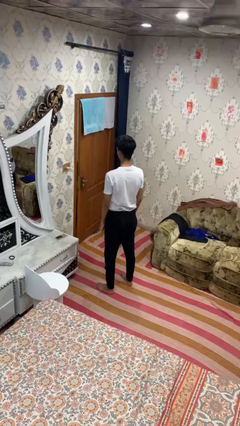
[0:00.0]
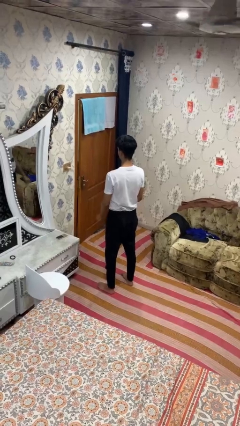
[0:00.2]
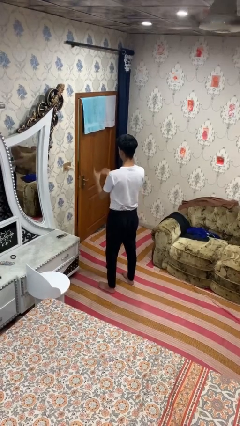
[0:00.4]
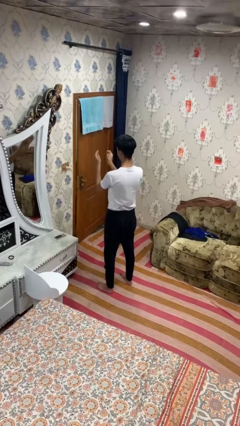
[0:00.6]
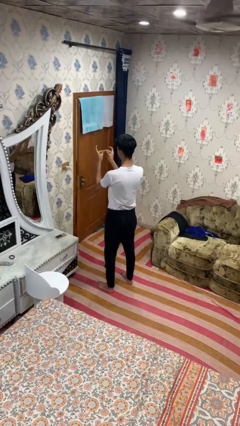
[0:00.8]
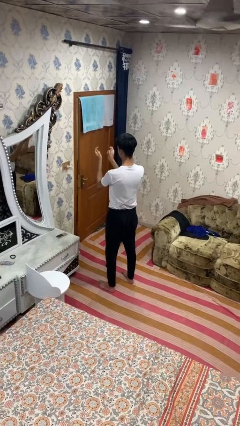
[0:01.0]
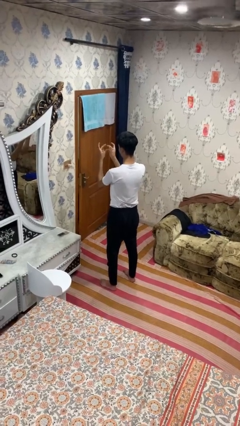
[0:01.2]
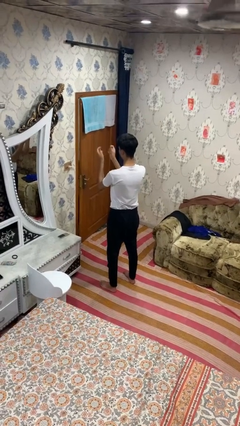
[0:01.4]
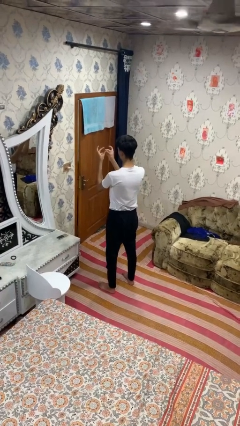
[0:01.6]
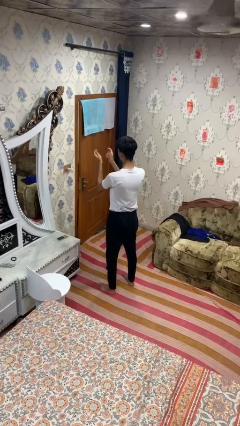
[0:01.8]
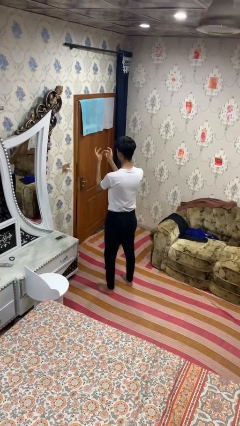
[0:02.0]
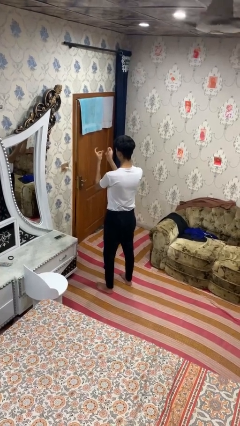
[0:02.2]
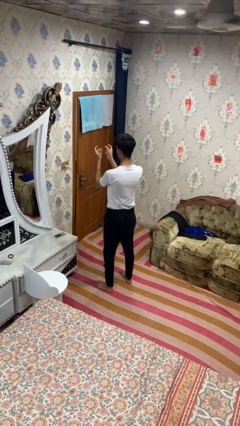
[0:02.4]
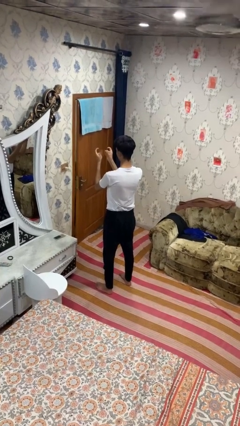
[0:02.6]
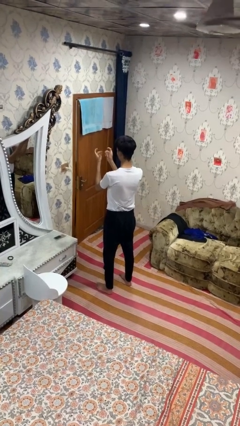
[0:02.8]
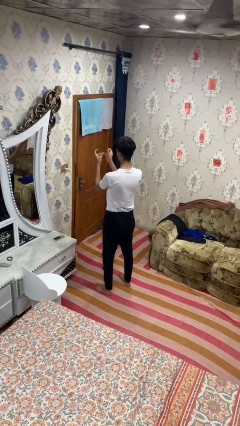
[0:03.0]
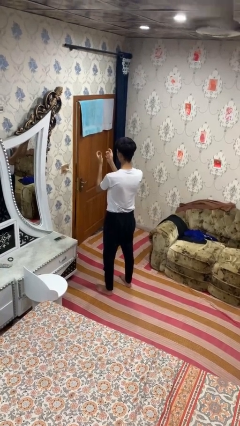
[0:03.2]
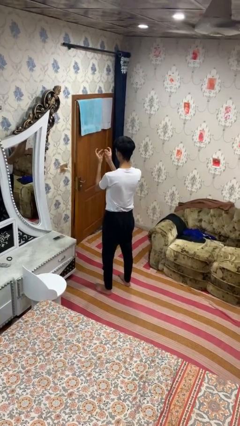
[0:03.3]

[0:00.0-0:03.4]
person snaps fingers

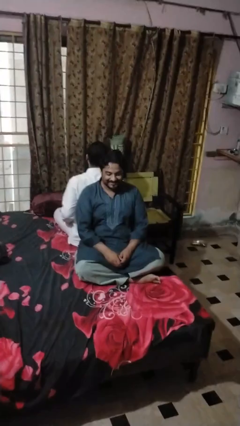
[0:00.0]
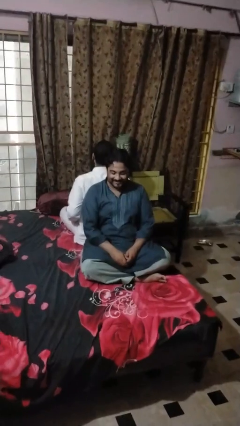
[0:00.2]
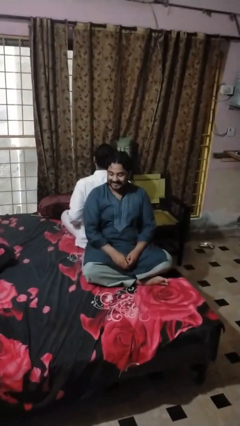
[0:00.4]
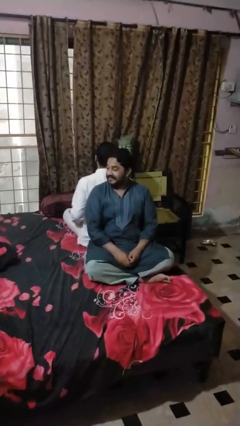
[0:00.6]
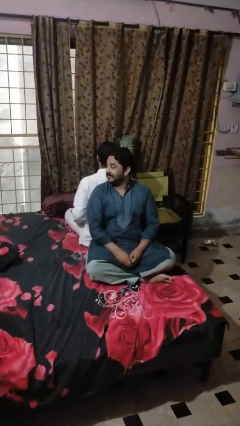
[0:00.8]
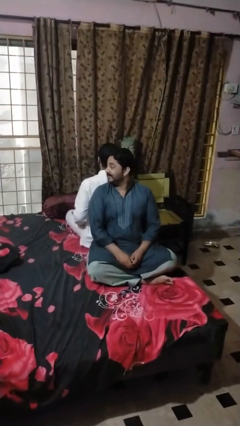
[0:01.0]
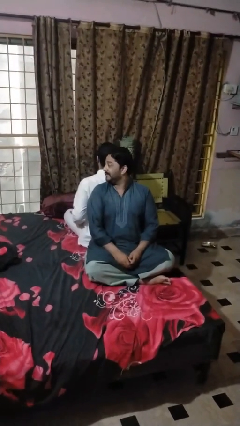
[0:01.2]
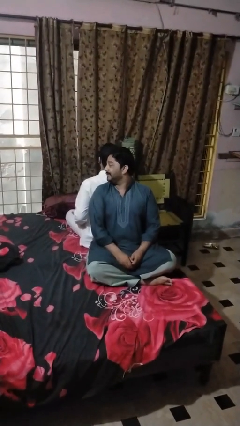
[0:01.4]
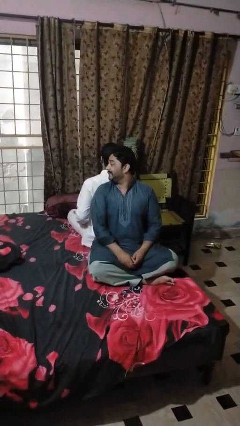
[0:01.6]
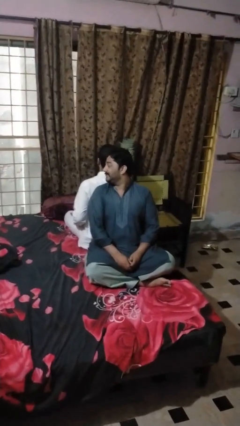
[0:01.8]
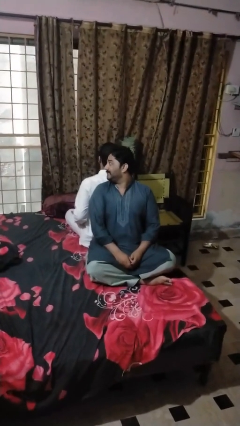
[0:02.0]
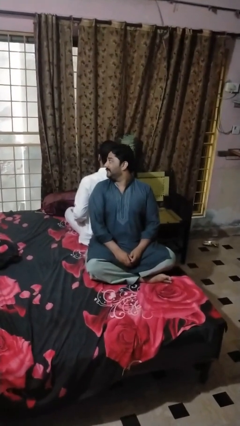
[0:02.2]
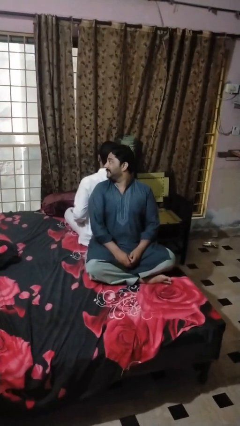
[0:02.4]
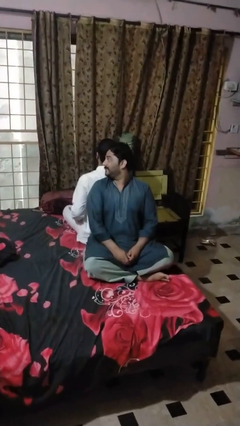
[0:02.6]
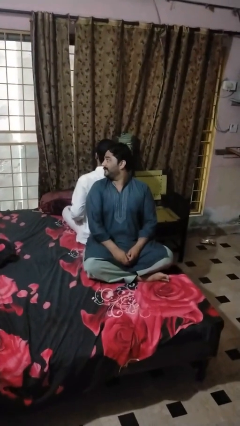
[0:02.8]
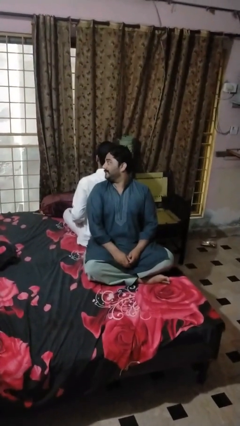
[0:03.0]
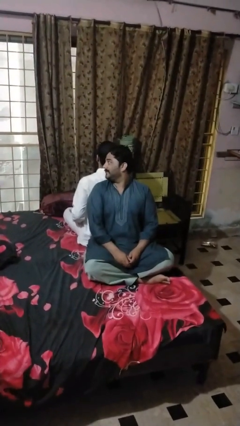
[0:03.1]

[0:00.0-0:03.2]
person looks over shoulder

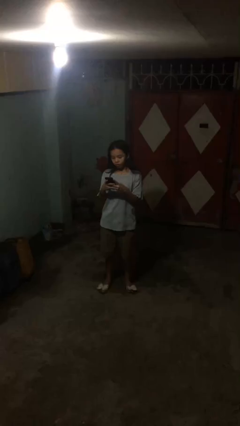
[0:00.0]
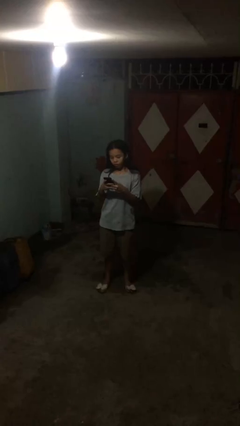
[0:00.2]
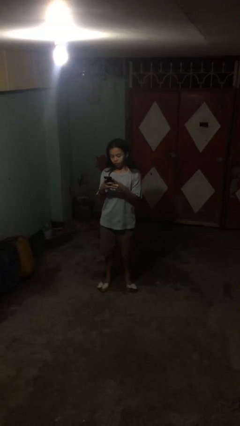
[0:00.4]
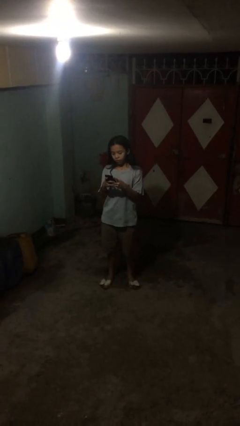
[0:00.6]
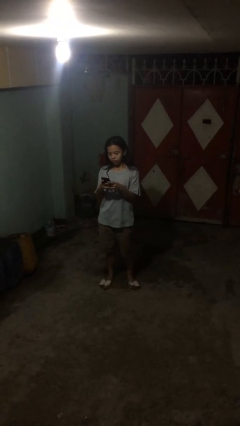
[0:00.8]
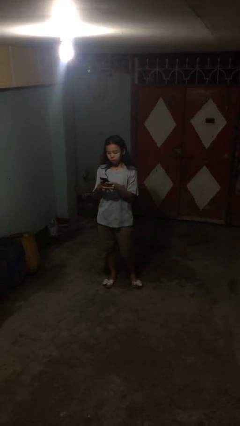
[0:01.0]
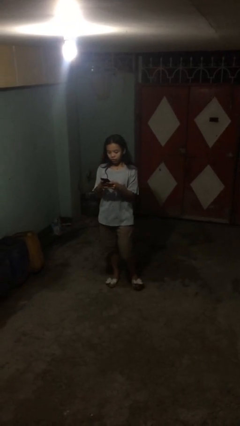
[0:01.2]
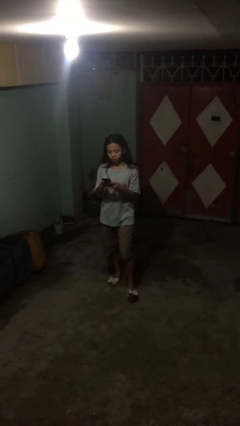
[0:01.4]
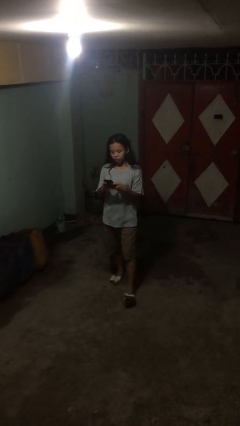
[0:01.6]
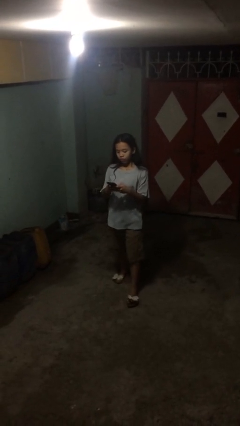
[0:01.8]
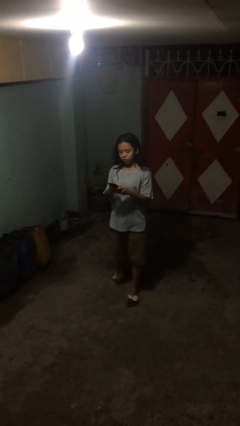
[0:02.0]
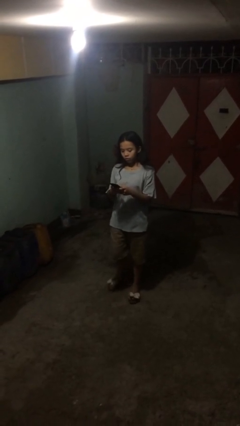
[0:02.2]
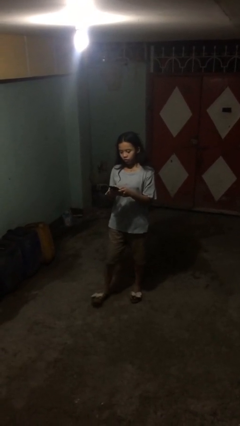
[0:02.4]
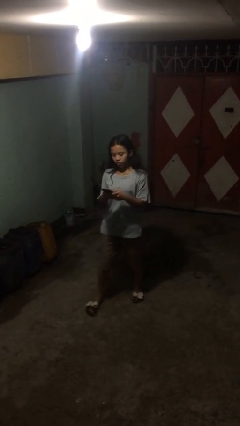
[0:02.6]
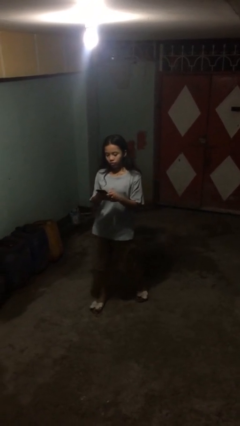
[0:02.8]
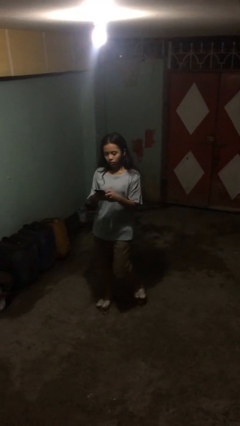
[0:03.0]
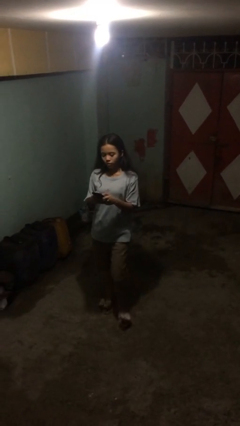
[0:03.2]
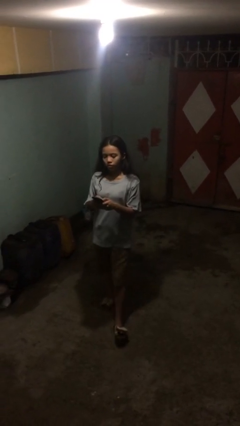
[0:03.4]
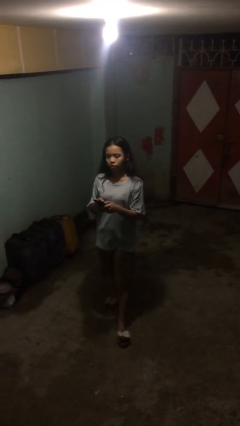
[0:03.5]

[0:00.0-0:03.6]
person texts on phone

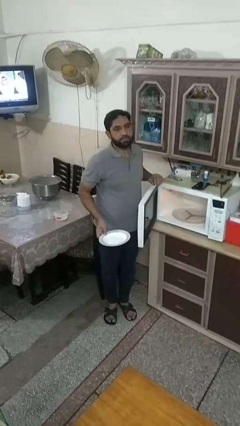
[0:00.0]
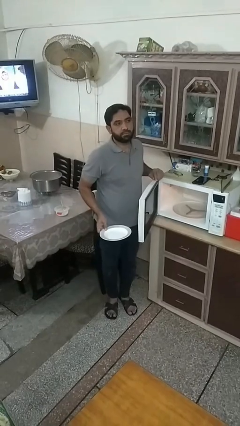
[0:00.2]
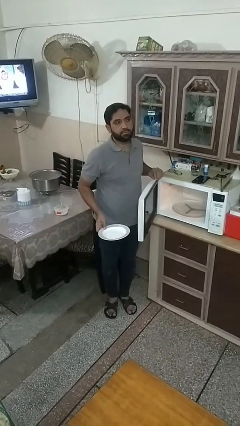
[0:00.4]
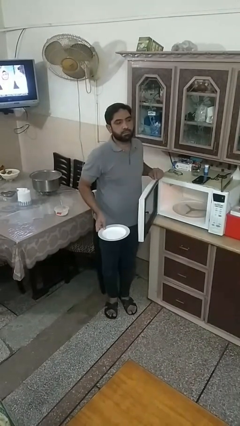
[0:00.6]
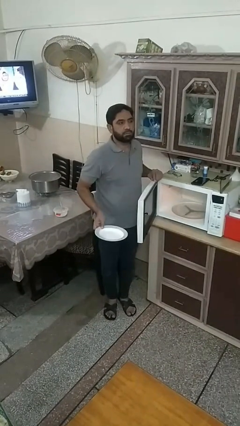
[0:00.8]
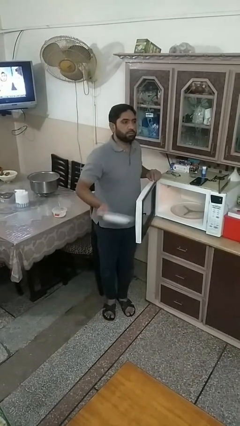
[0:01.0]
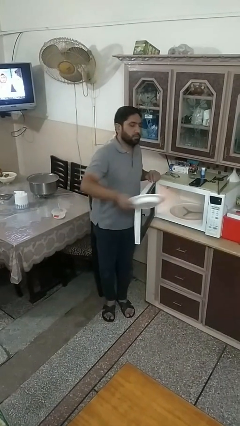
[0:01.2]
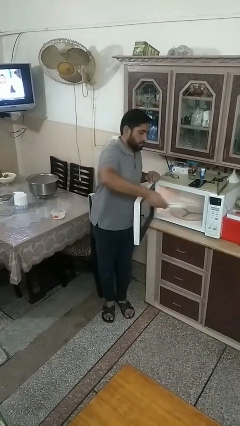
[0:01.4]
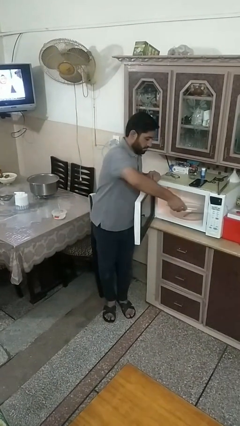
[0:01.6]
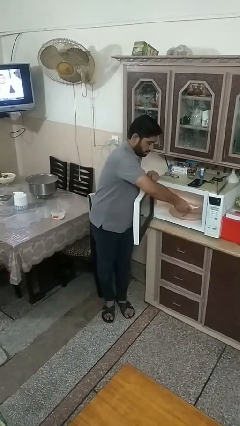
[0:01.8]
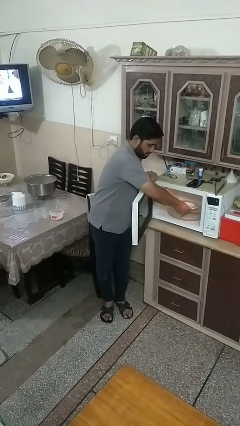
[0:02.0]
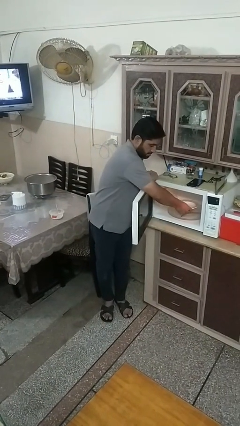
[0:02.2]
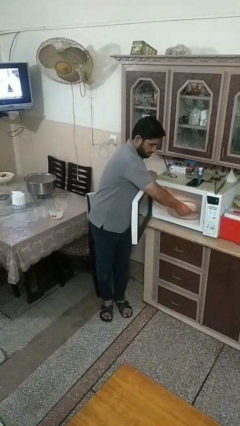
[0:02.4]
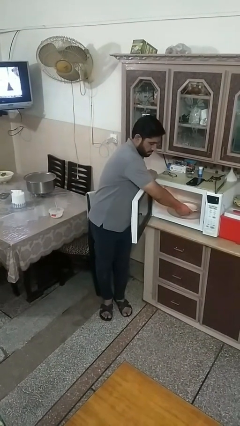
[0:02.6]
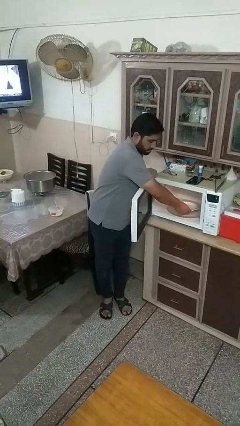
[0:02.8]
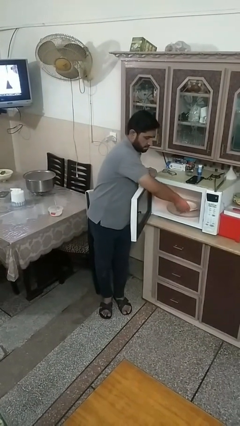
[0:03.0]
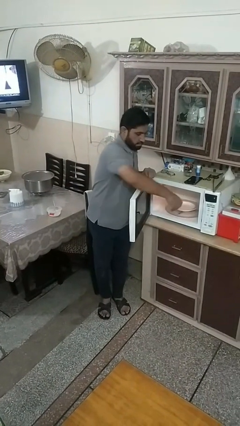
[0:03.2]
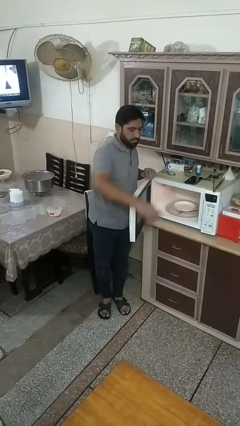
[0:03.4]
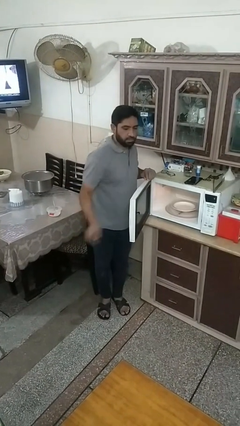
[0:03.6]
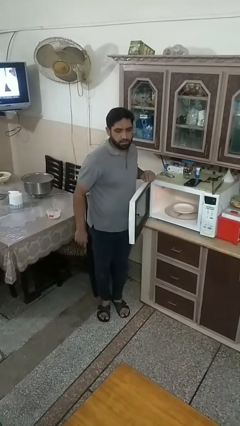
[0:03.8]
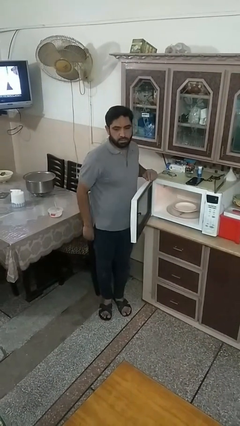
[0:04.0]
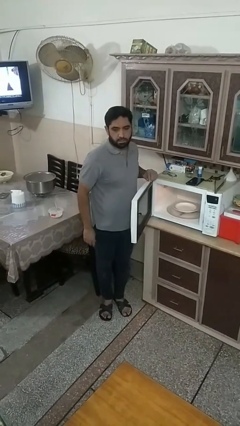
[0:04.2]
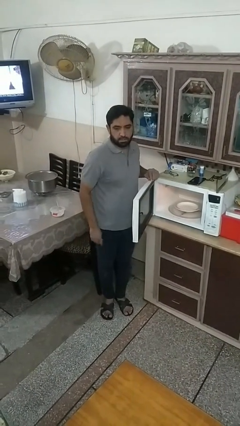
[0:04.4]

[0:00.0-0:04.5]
person puts object into microwave

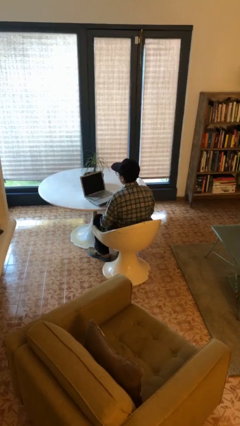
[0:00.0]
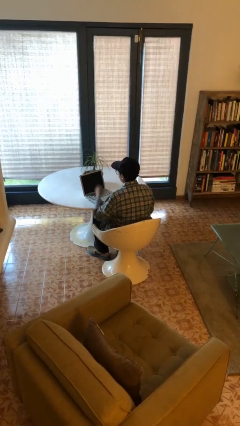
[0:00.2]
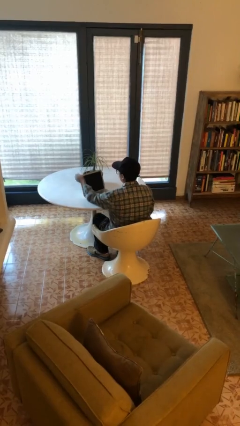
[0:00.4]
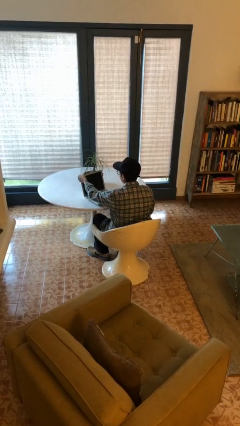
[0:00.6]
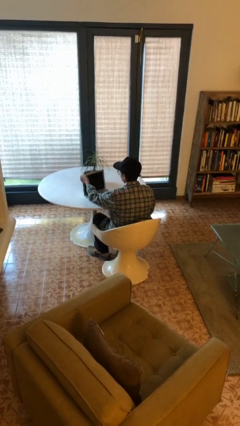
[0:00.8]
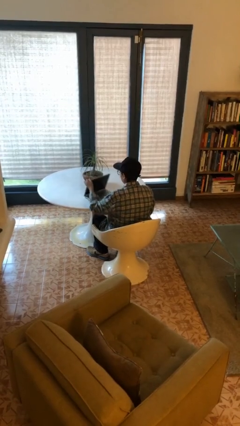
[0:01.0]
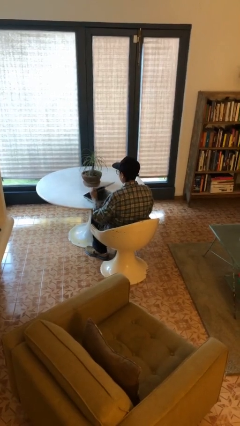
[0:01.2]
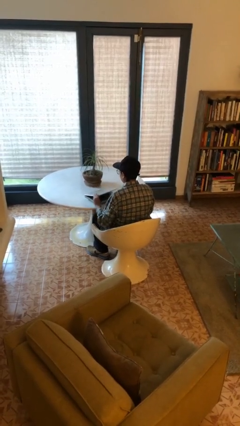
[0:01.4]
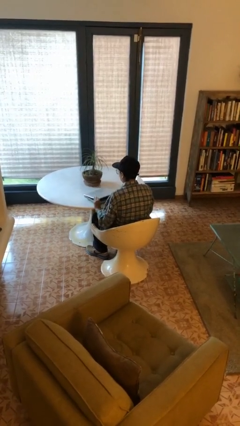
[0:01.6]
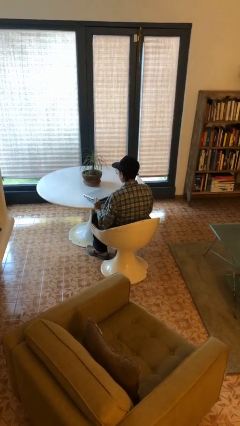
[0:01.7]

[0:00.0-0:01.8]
person closes laptop

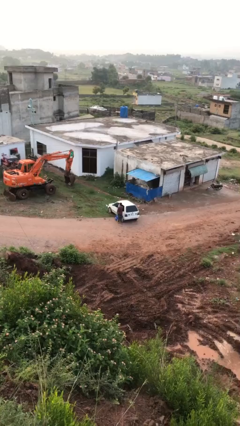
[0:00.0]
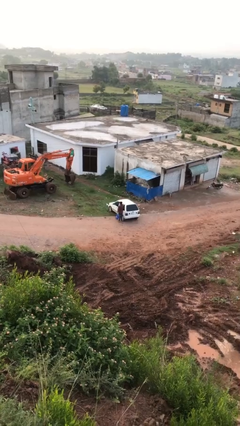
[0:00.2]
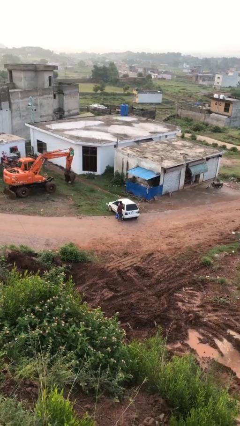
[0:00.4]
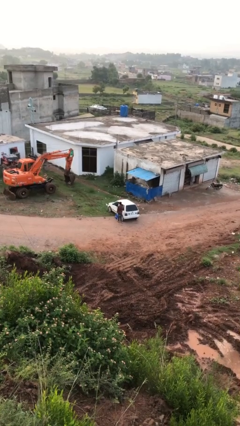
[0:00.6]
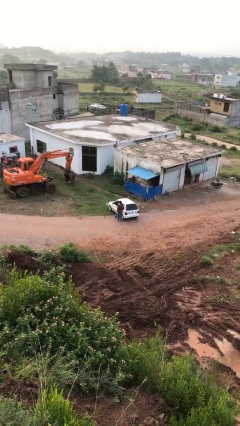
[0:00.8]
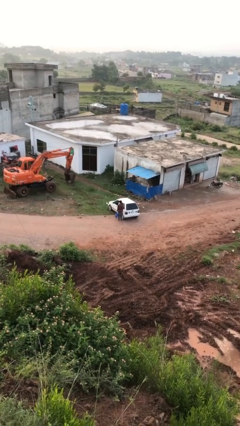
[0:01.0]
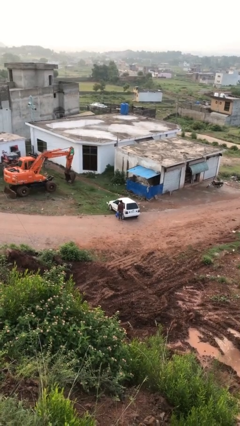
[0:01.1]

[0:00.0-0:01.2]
person closes car door
